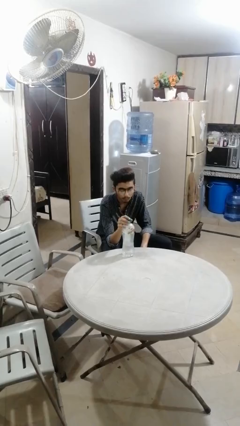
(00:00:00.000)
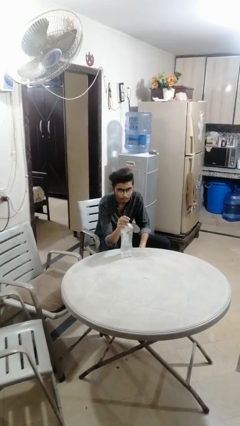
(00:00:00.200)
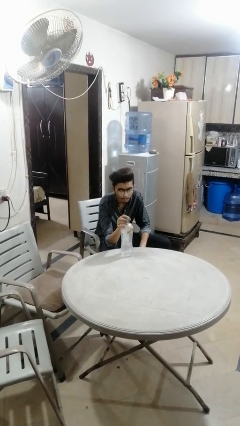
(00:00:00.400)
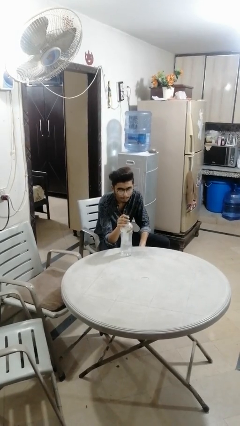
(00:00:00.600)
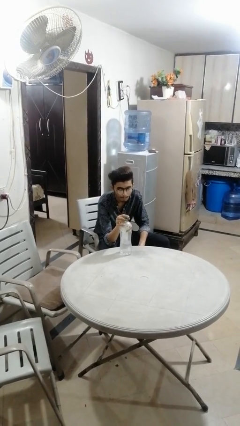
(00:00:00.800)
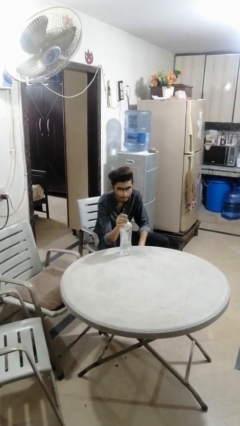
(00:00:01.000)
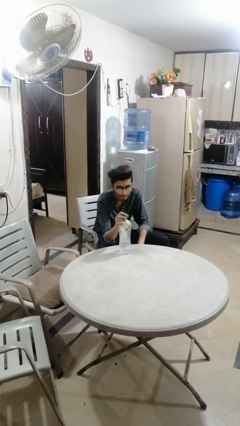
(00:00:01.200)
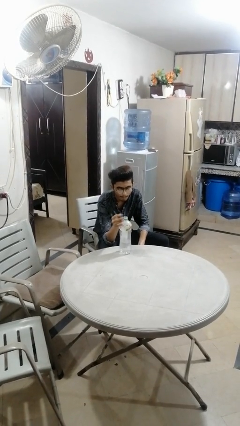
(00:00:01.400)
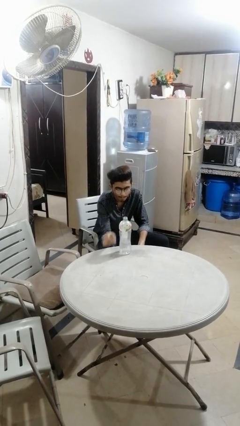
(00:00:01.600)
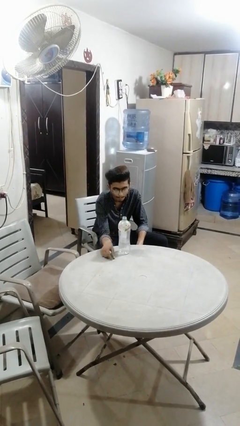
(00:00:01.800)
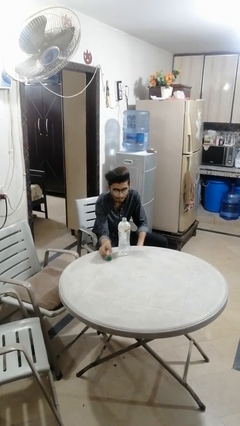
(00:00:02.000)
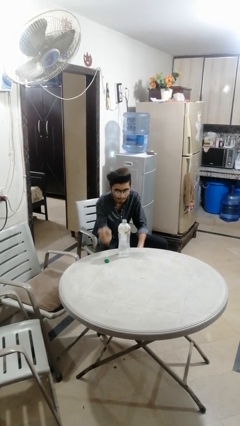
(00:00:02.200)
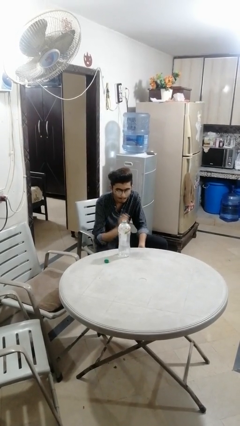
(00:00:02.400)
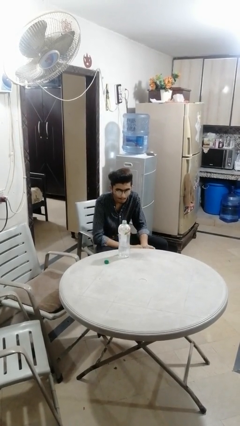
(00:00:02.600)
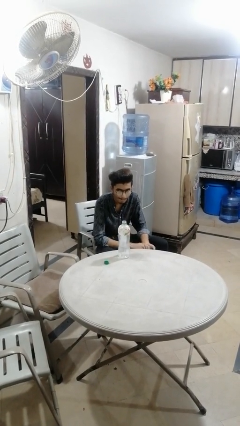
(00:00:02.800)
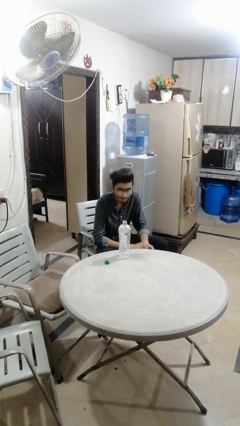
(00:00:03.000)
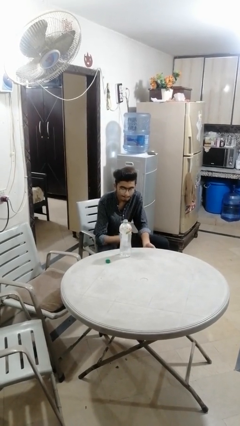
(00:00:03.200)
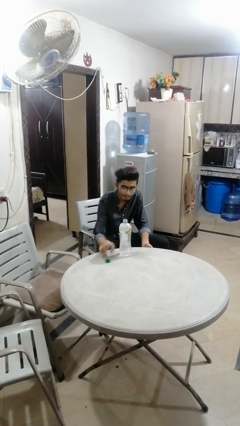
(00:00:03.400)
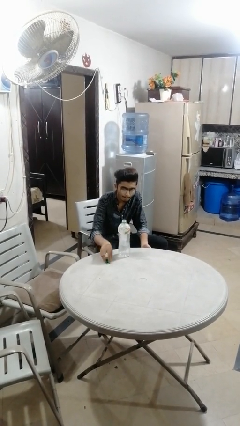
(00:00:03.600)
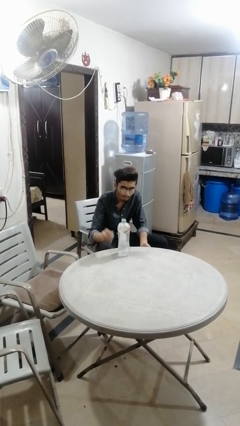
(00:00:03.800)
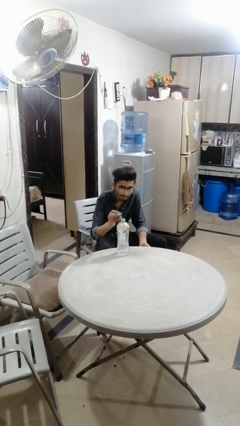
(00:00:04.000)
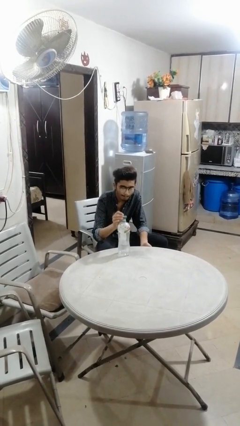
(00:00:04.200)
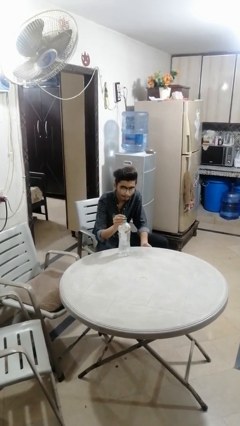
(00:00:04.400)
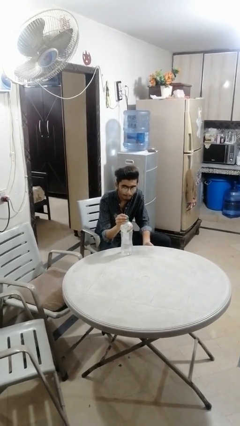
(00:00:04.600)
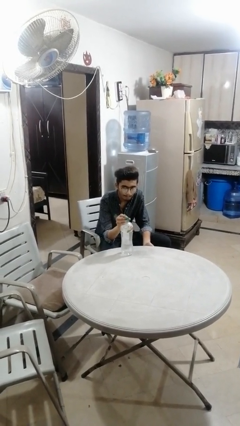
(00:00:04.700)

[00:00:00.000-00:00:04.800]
person unscrews lid from bottle

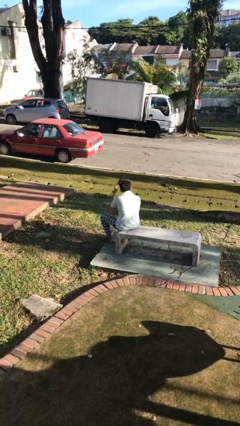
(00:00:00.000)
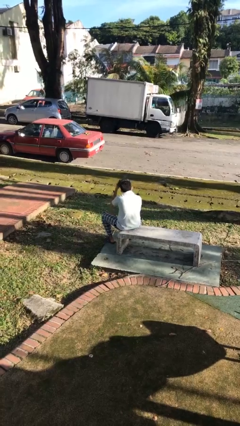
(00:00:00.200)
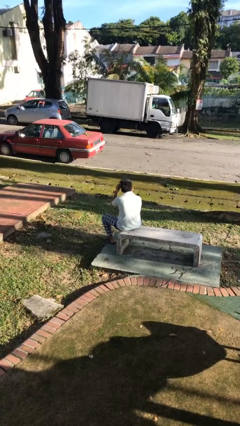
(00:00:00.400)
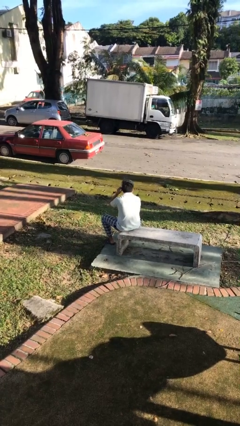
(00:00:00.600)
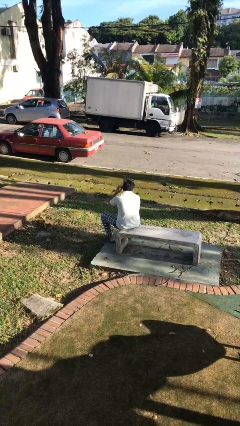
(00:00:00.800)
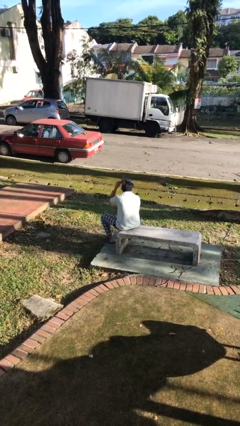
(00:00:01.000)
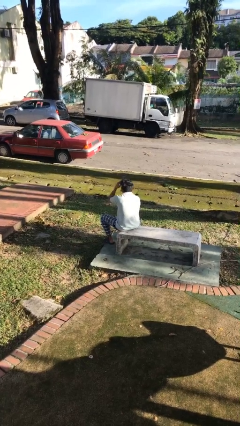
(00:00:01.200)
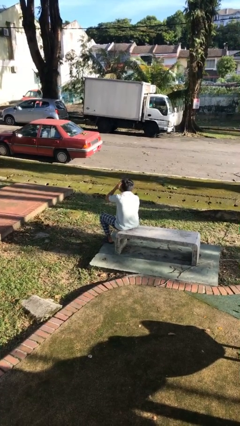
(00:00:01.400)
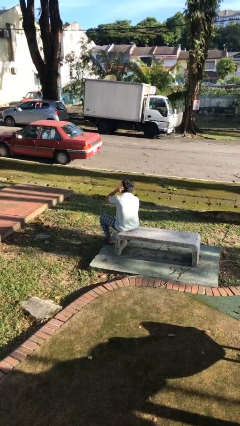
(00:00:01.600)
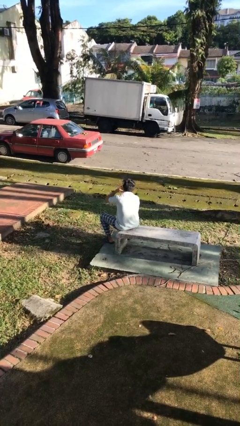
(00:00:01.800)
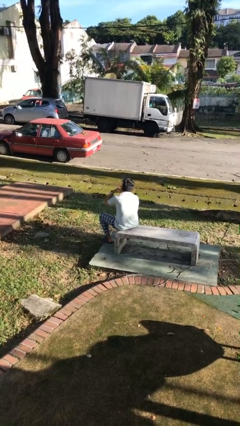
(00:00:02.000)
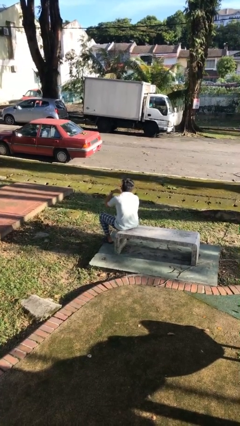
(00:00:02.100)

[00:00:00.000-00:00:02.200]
person strokes hair

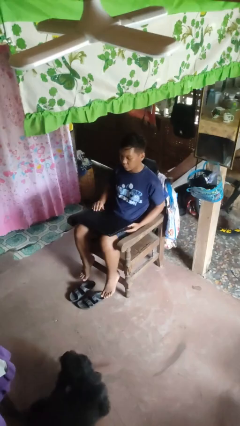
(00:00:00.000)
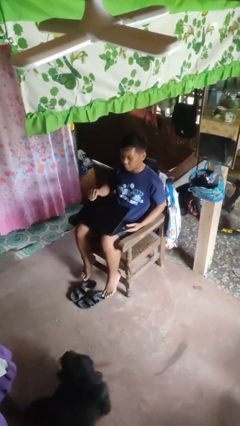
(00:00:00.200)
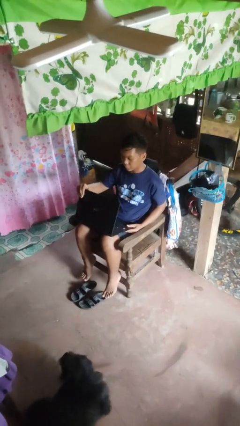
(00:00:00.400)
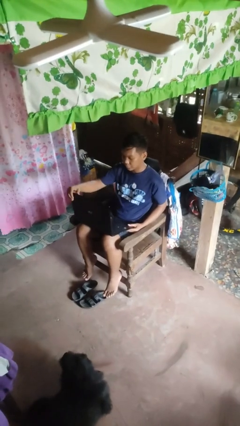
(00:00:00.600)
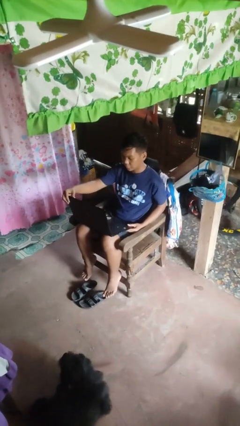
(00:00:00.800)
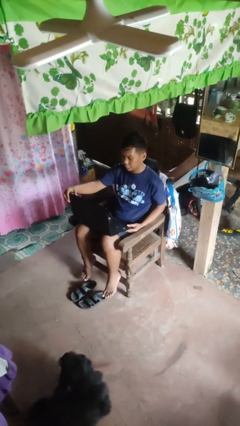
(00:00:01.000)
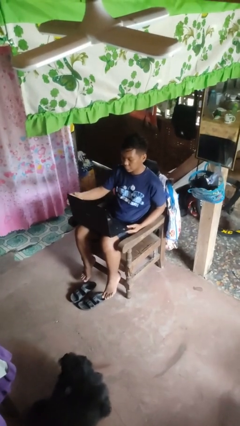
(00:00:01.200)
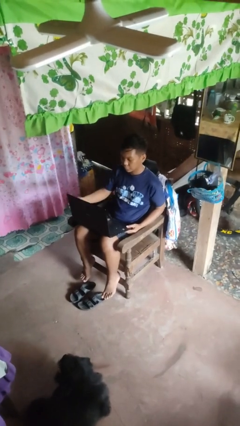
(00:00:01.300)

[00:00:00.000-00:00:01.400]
person opens laptop

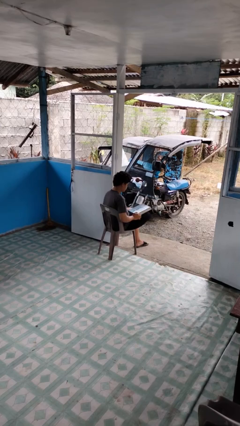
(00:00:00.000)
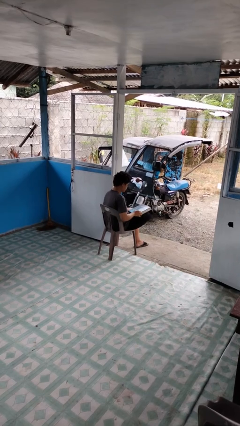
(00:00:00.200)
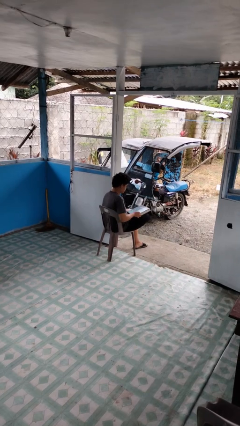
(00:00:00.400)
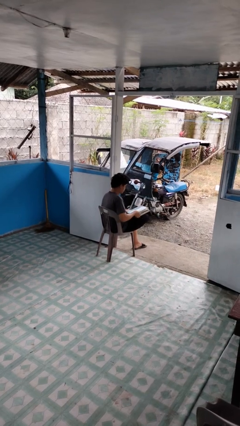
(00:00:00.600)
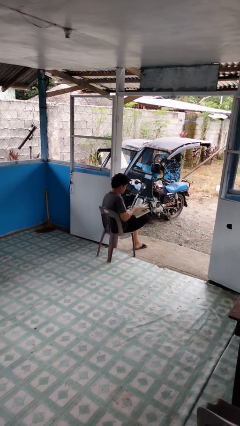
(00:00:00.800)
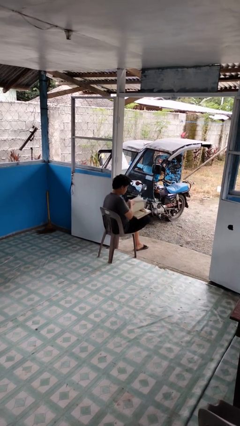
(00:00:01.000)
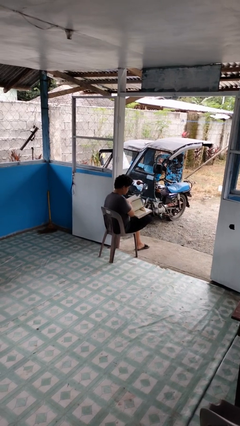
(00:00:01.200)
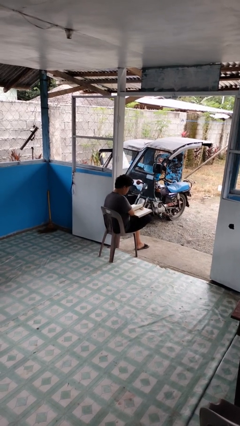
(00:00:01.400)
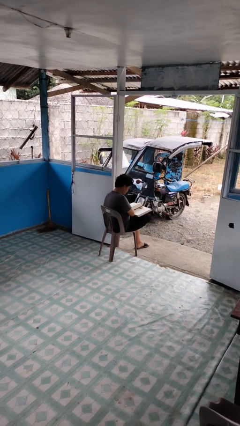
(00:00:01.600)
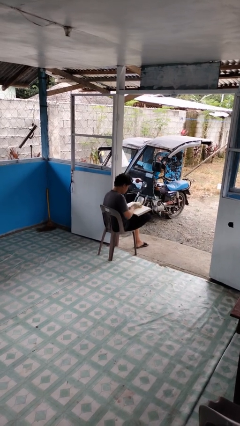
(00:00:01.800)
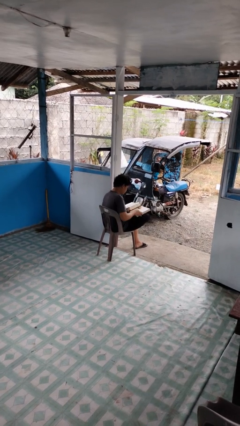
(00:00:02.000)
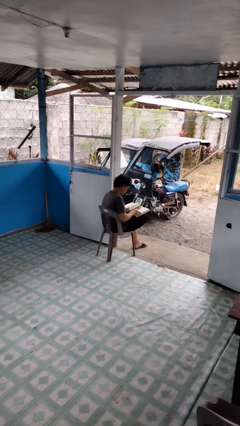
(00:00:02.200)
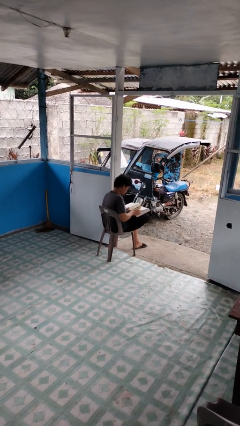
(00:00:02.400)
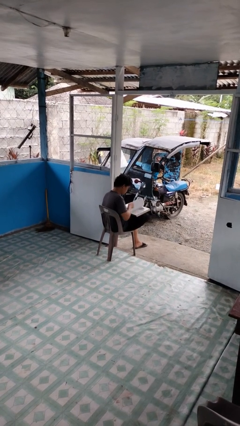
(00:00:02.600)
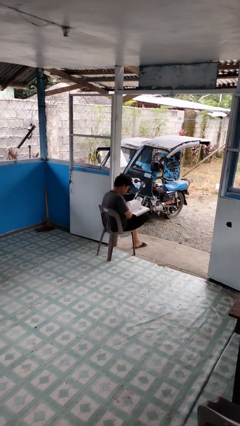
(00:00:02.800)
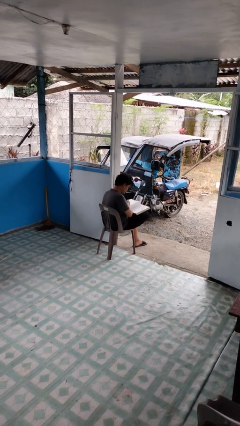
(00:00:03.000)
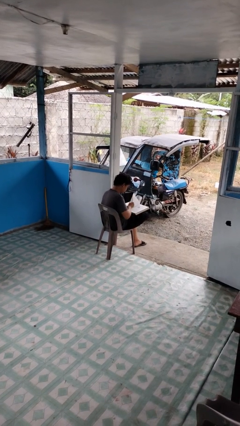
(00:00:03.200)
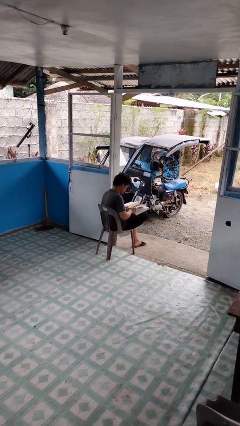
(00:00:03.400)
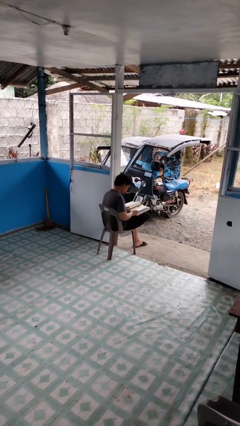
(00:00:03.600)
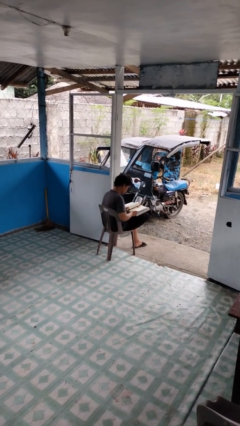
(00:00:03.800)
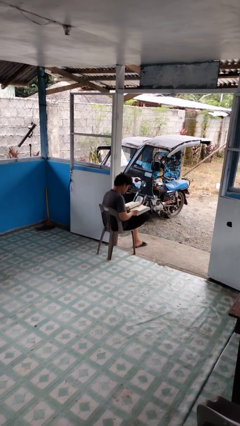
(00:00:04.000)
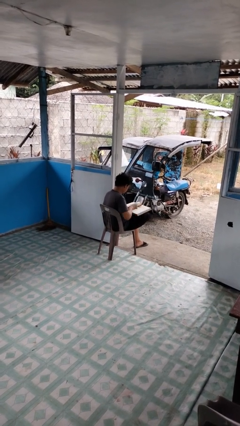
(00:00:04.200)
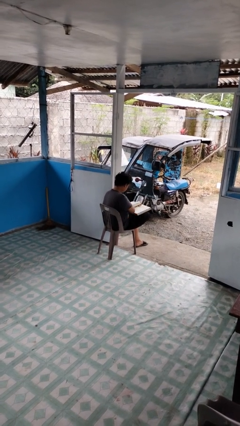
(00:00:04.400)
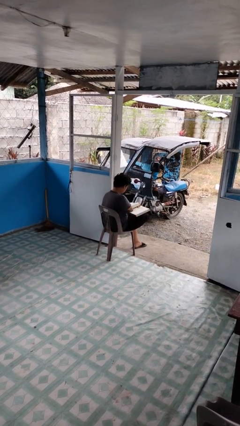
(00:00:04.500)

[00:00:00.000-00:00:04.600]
person reads book

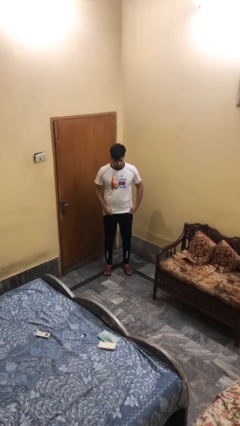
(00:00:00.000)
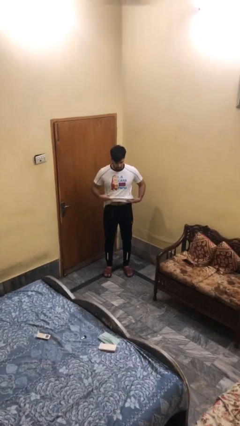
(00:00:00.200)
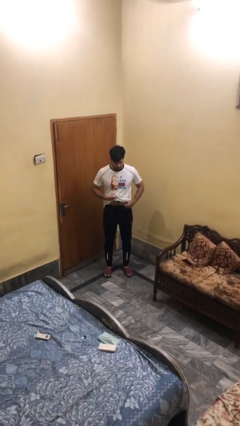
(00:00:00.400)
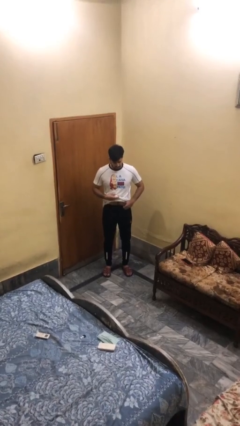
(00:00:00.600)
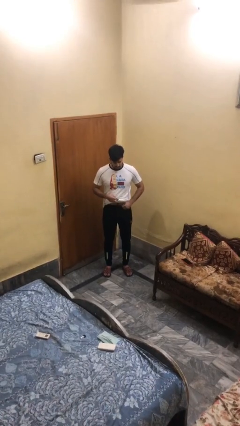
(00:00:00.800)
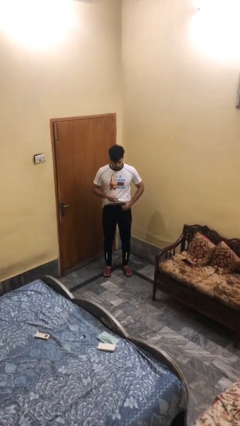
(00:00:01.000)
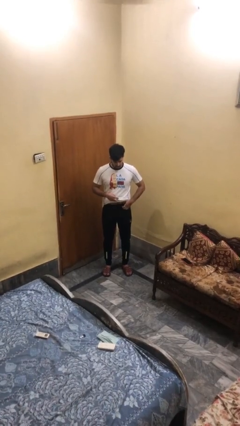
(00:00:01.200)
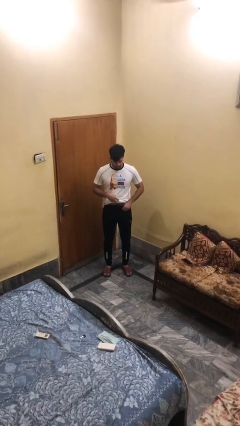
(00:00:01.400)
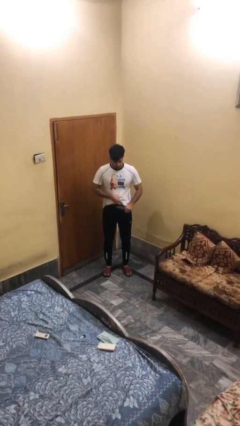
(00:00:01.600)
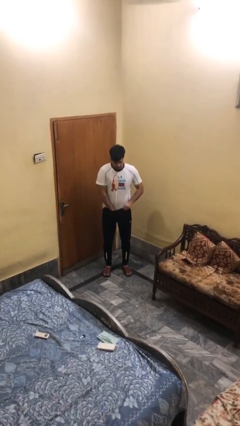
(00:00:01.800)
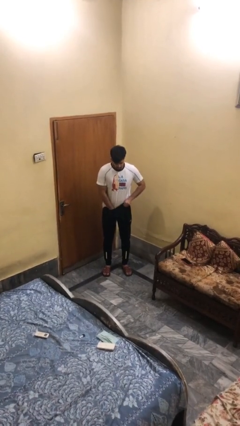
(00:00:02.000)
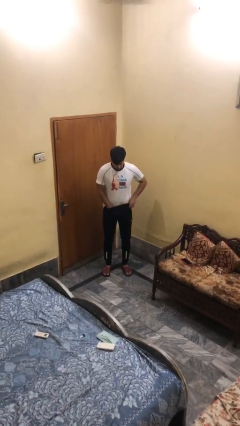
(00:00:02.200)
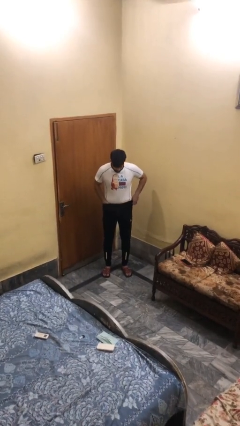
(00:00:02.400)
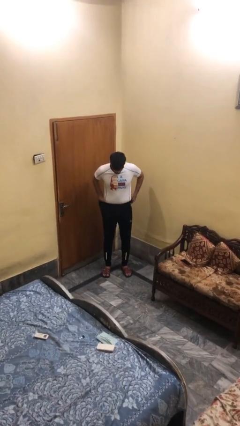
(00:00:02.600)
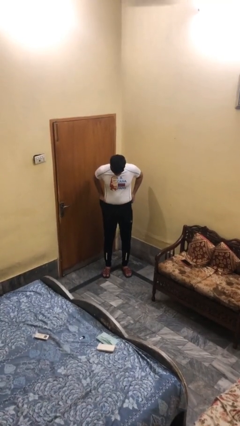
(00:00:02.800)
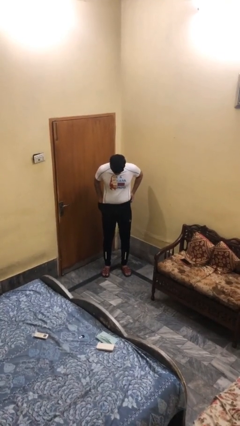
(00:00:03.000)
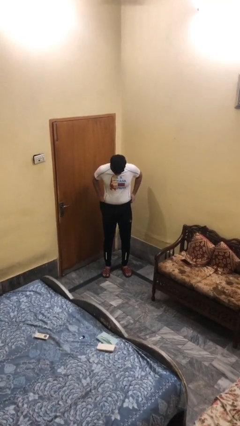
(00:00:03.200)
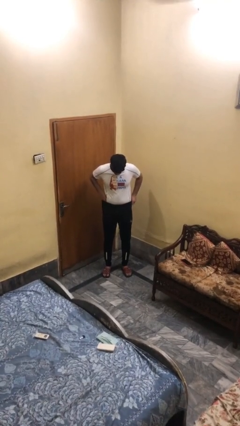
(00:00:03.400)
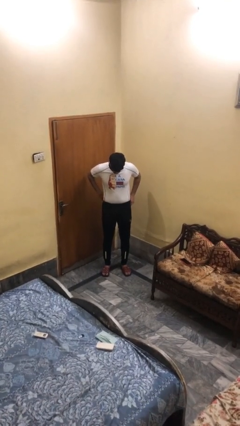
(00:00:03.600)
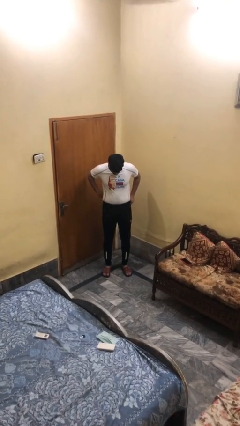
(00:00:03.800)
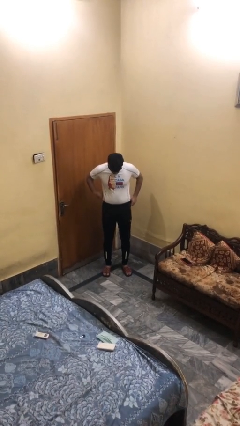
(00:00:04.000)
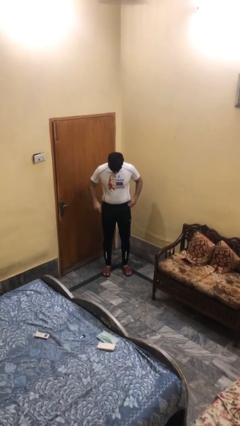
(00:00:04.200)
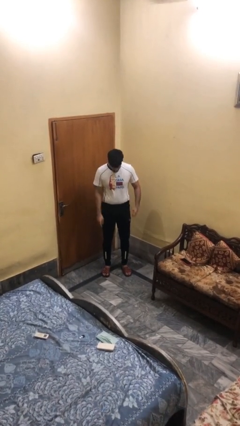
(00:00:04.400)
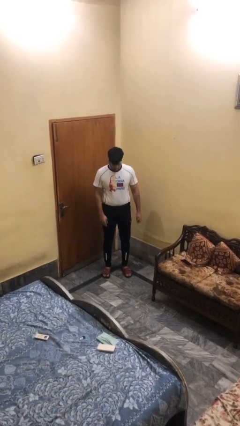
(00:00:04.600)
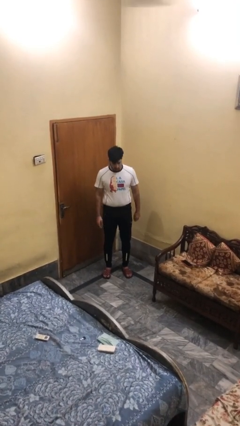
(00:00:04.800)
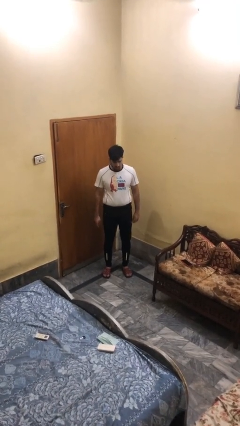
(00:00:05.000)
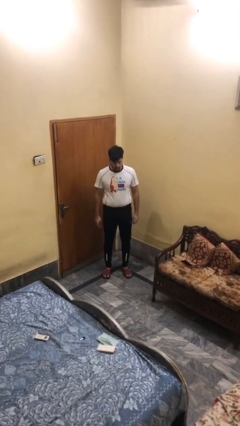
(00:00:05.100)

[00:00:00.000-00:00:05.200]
person tucks in shirt
